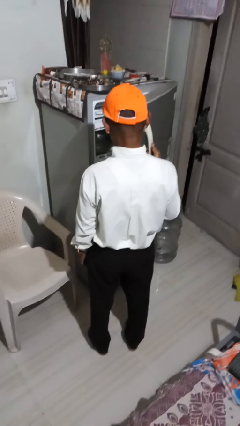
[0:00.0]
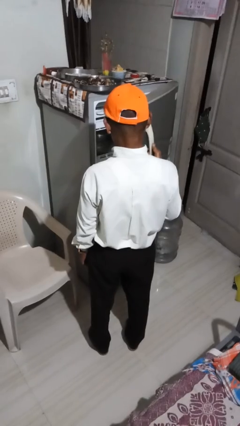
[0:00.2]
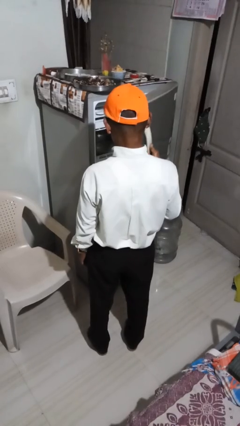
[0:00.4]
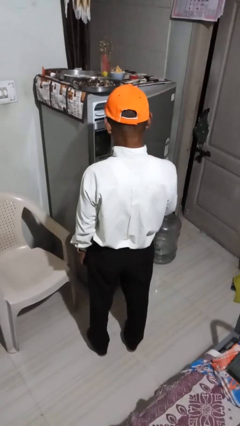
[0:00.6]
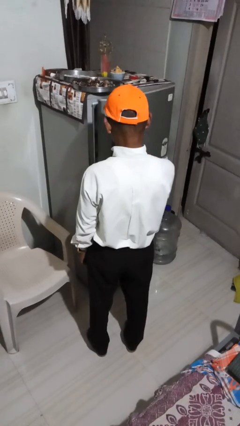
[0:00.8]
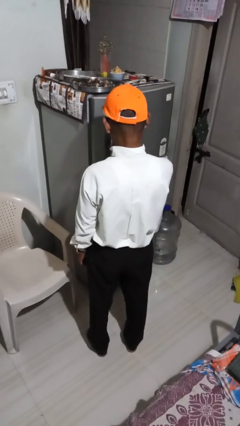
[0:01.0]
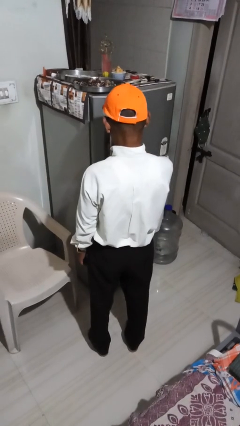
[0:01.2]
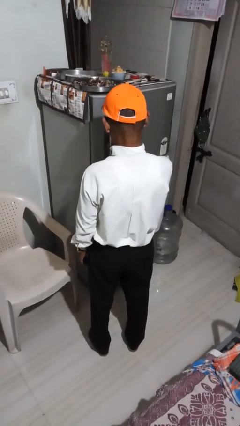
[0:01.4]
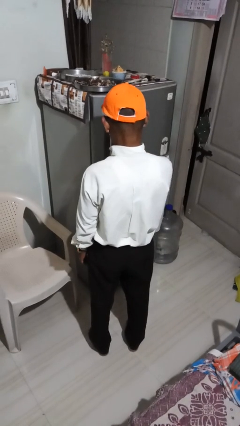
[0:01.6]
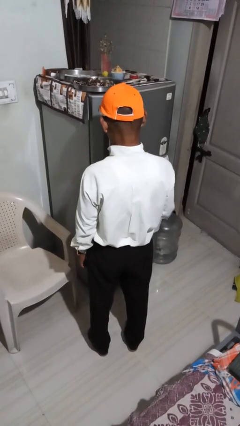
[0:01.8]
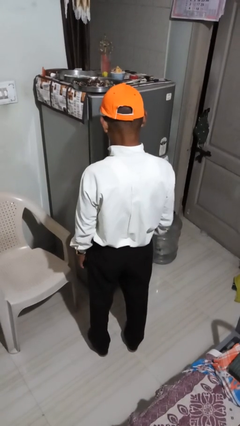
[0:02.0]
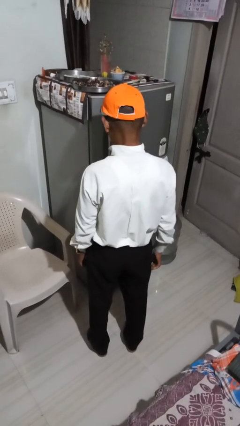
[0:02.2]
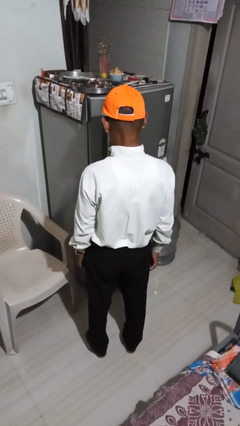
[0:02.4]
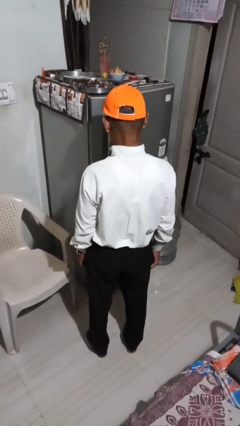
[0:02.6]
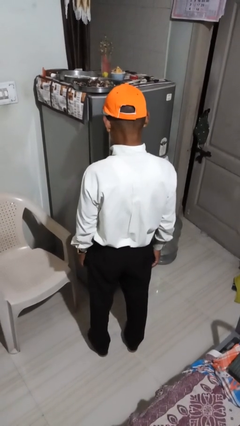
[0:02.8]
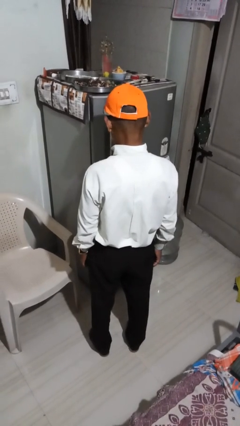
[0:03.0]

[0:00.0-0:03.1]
person closes clothes washer

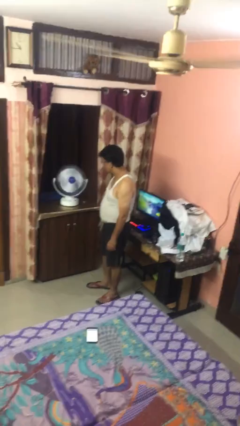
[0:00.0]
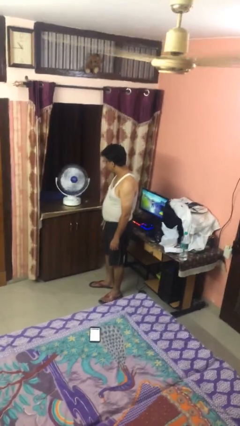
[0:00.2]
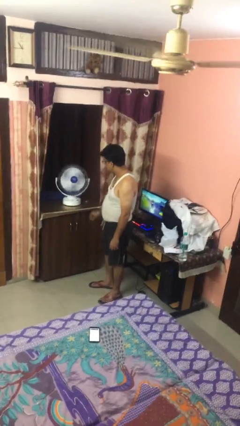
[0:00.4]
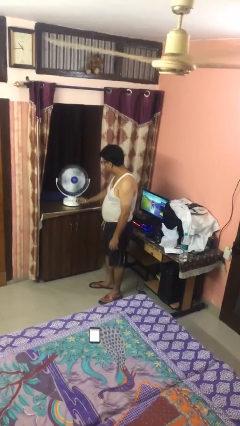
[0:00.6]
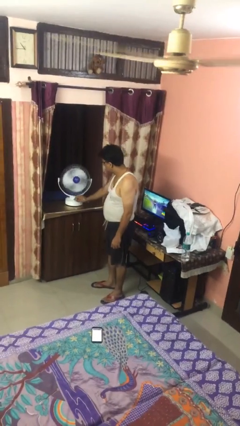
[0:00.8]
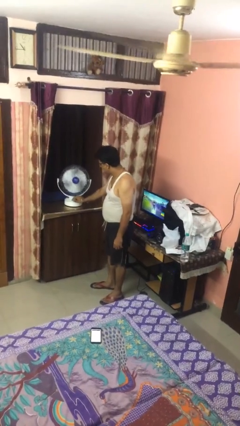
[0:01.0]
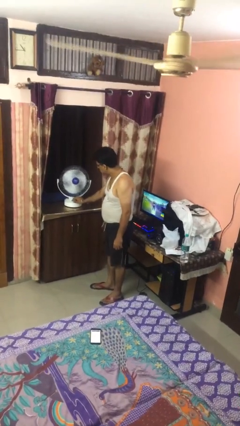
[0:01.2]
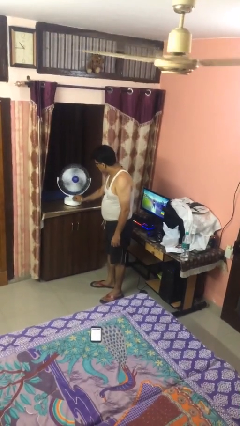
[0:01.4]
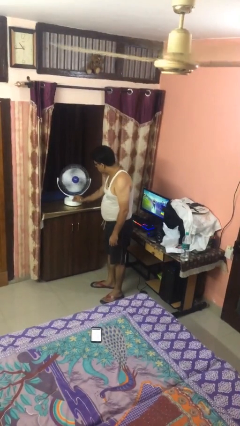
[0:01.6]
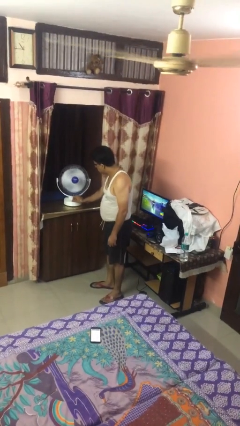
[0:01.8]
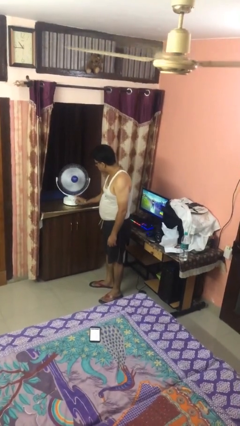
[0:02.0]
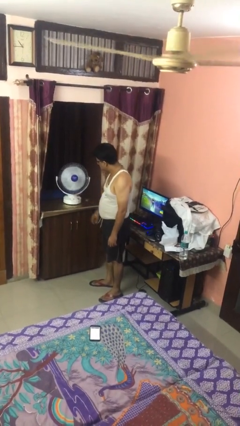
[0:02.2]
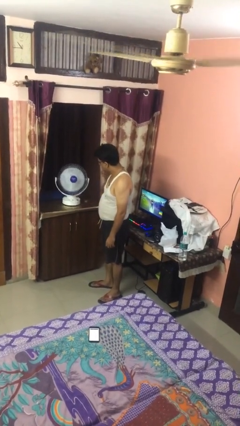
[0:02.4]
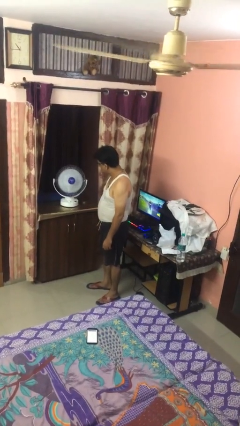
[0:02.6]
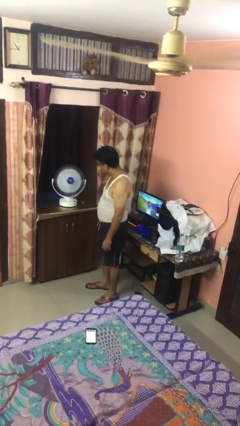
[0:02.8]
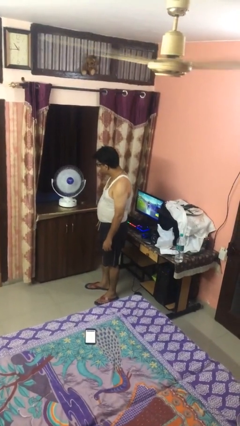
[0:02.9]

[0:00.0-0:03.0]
person turns on fan

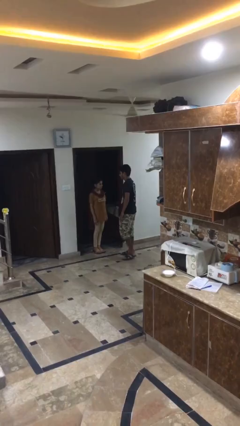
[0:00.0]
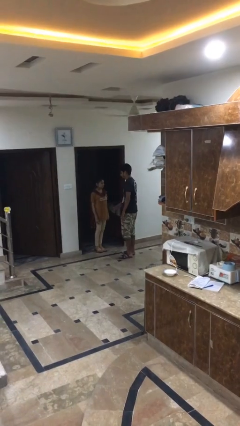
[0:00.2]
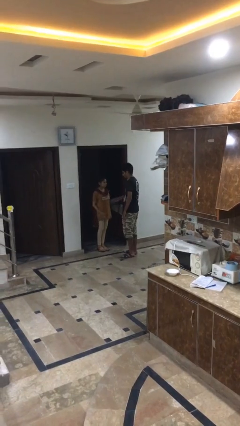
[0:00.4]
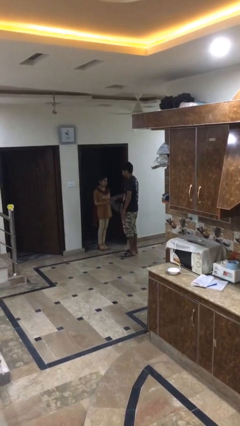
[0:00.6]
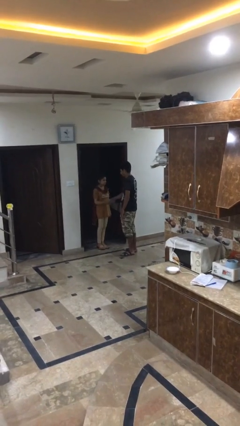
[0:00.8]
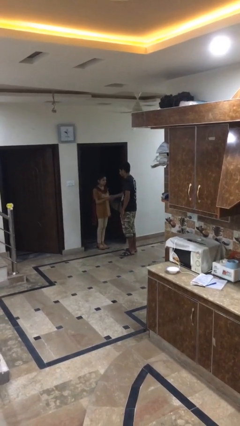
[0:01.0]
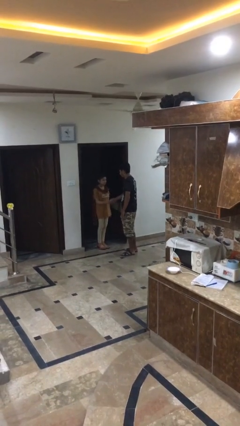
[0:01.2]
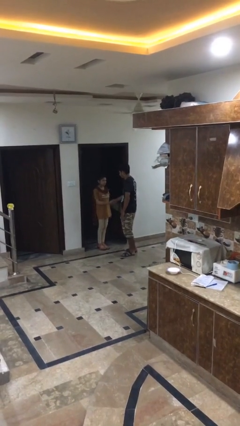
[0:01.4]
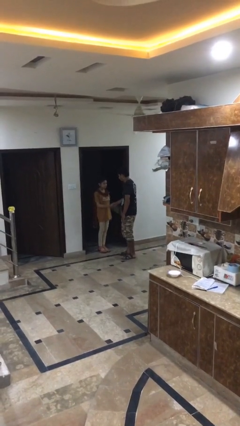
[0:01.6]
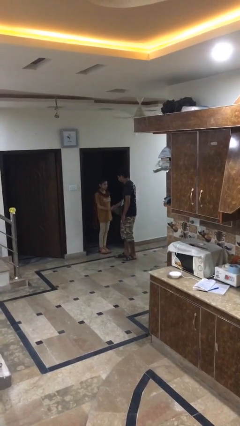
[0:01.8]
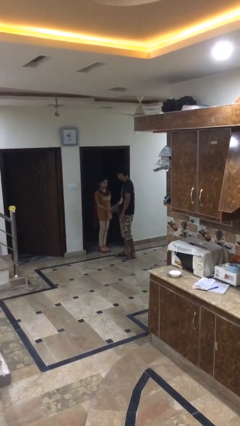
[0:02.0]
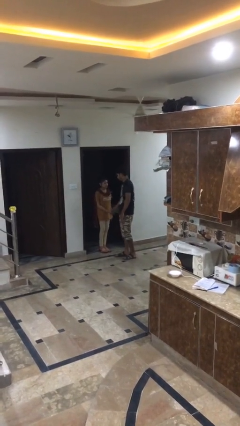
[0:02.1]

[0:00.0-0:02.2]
person shakes hand

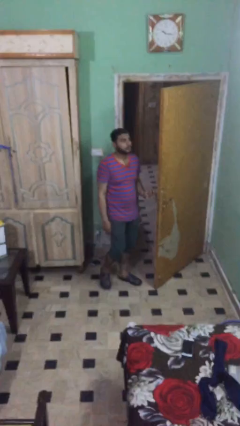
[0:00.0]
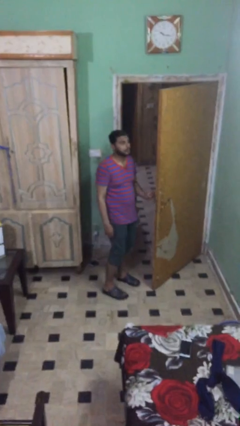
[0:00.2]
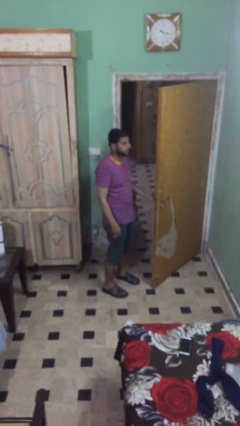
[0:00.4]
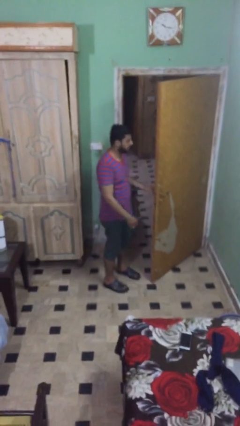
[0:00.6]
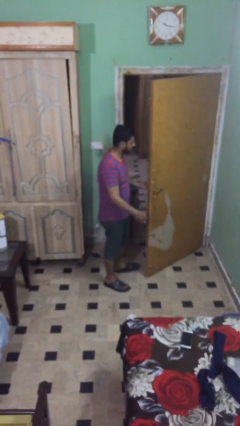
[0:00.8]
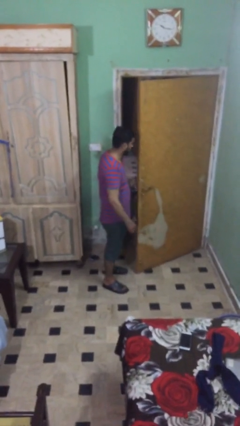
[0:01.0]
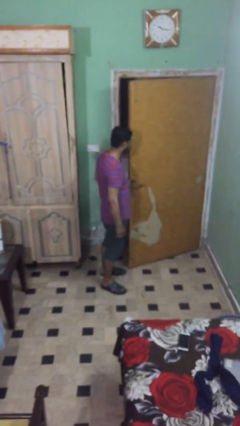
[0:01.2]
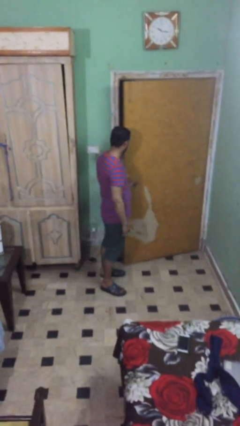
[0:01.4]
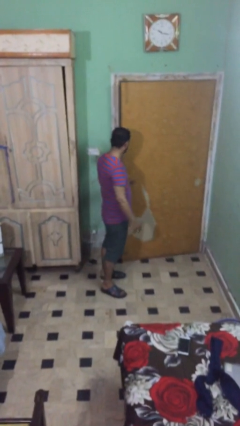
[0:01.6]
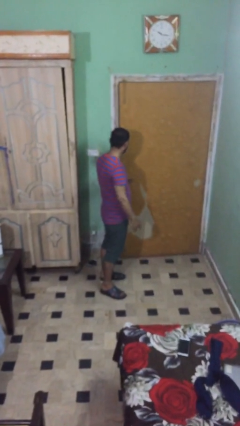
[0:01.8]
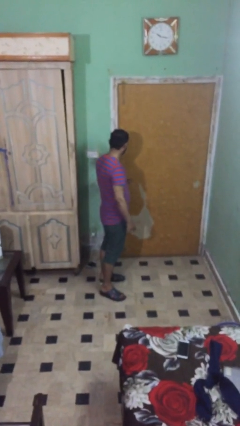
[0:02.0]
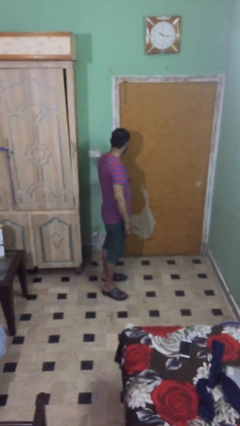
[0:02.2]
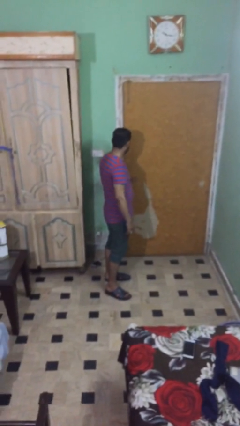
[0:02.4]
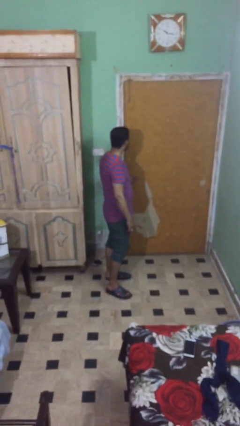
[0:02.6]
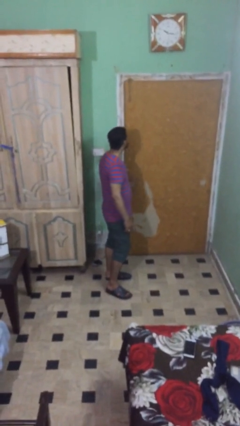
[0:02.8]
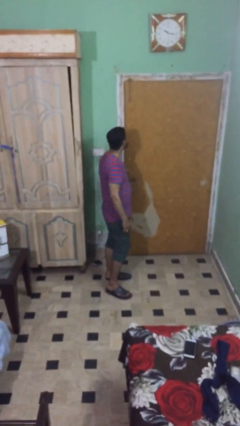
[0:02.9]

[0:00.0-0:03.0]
person closes facility door

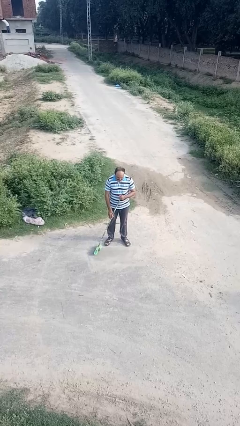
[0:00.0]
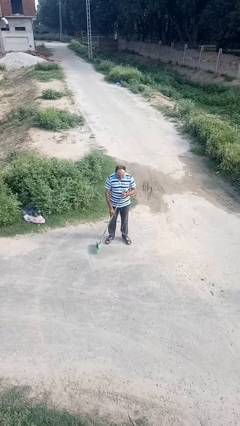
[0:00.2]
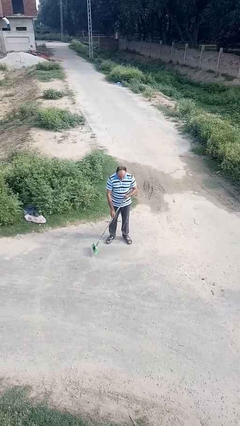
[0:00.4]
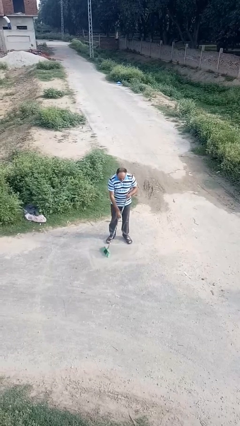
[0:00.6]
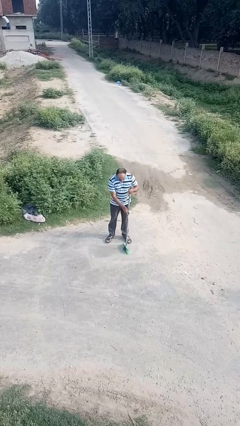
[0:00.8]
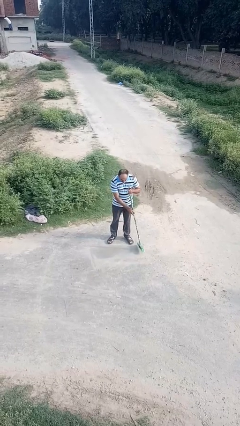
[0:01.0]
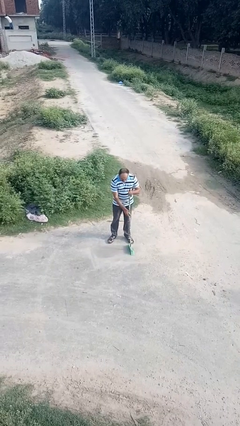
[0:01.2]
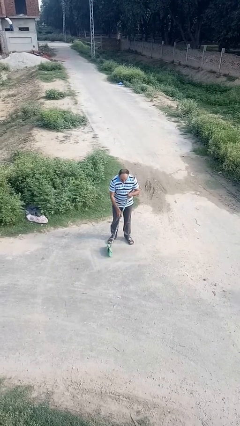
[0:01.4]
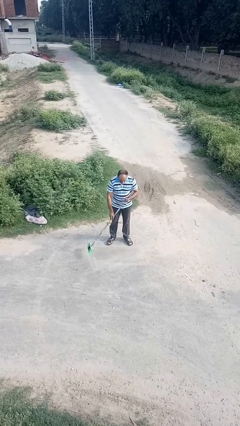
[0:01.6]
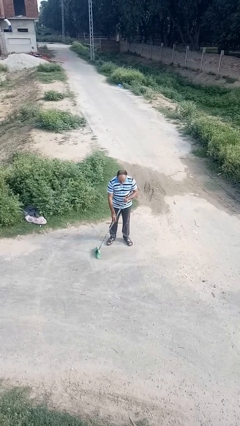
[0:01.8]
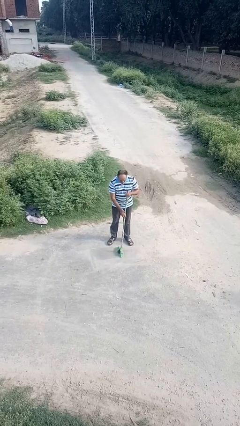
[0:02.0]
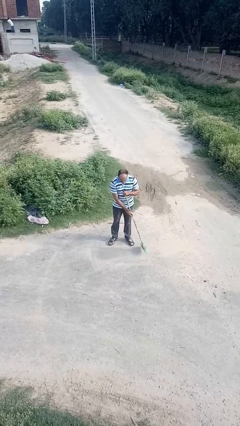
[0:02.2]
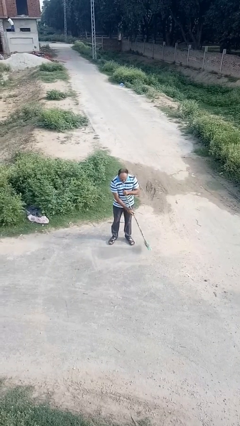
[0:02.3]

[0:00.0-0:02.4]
person sweeps floor

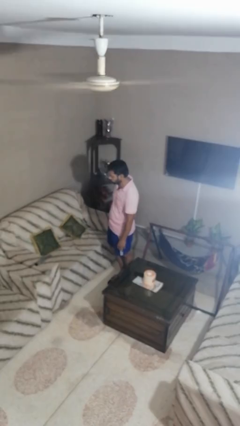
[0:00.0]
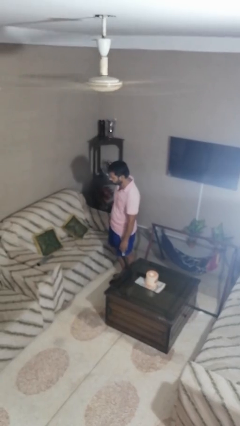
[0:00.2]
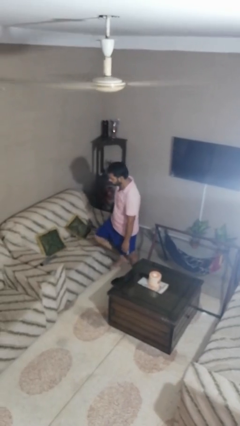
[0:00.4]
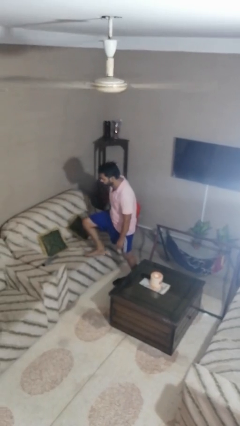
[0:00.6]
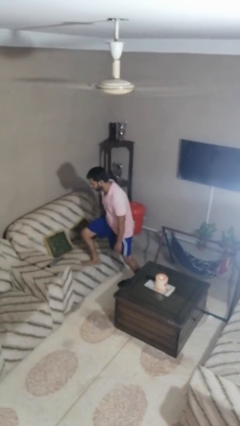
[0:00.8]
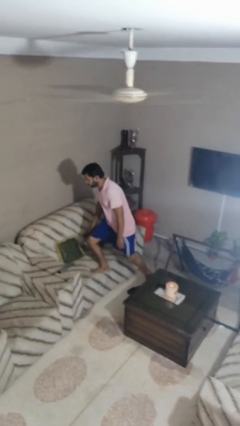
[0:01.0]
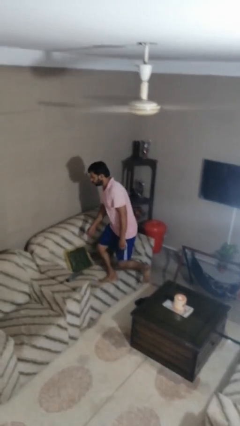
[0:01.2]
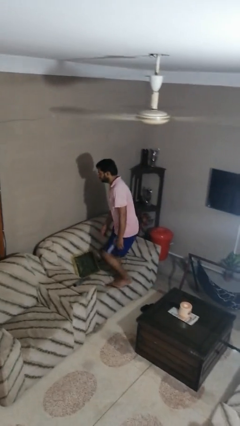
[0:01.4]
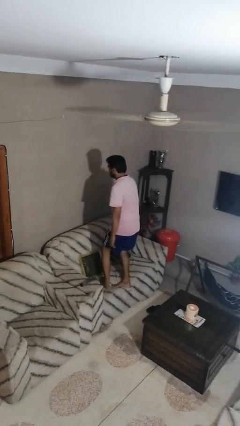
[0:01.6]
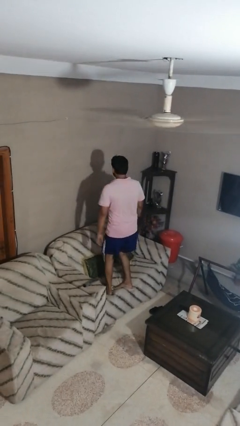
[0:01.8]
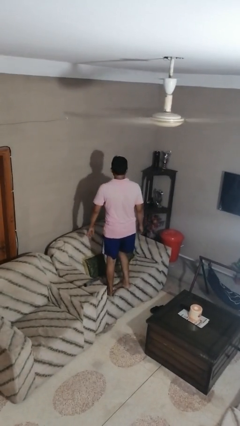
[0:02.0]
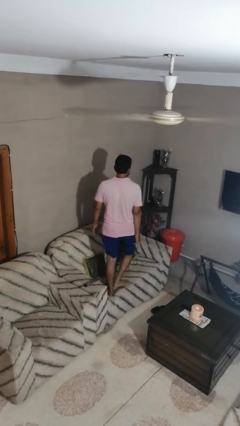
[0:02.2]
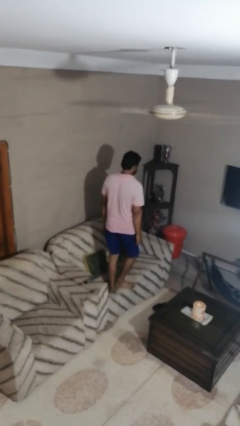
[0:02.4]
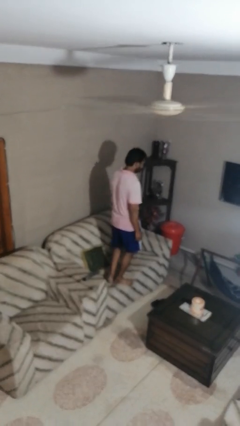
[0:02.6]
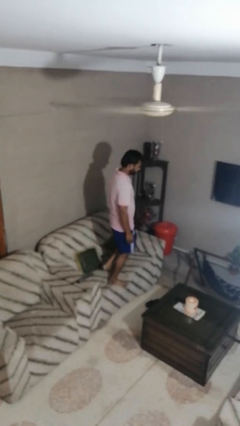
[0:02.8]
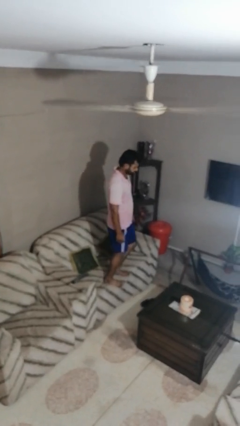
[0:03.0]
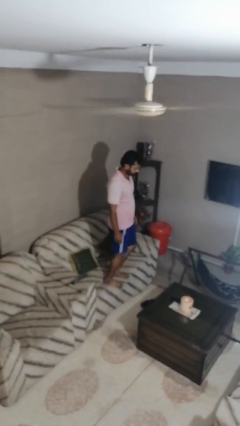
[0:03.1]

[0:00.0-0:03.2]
person climbs on couch
